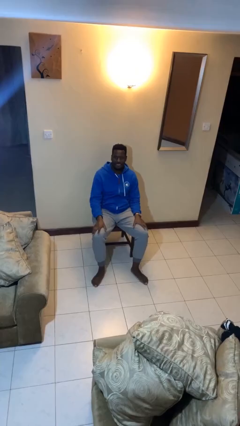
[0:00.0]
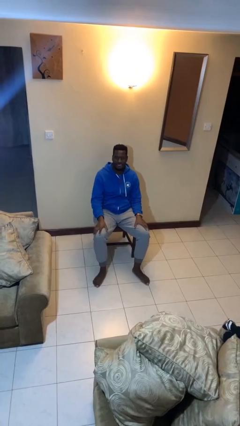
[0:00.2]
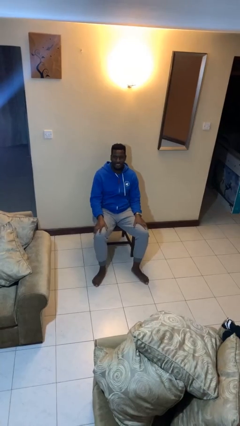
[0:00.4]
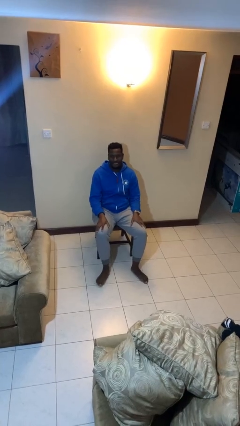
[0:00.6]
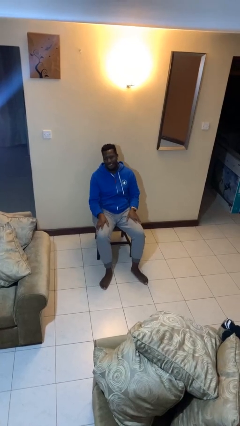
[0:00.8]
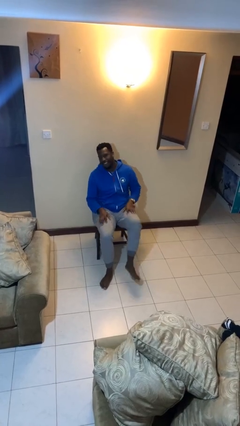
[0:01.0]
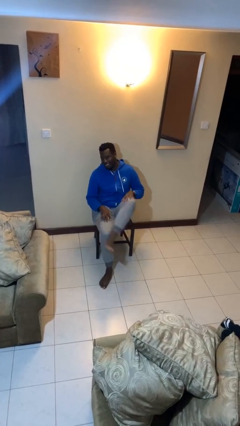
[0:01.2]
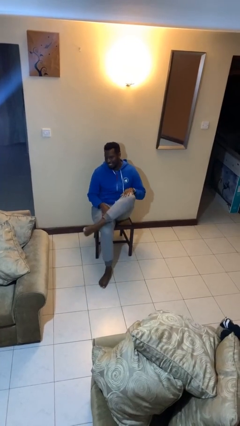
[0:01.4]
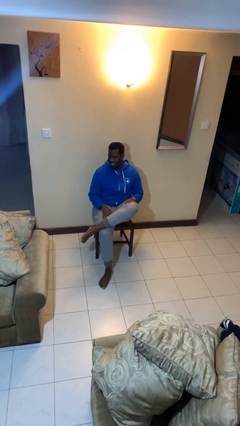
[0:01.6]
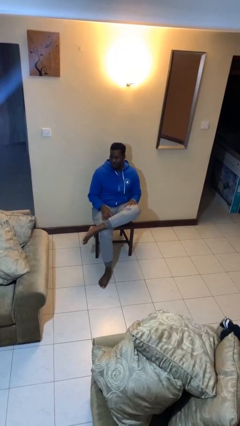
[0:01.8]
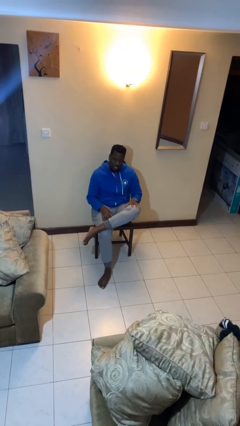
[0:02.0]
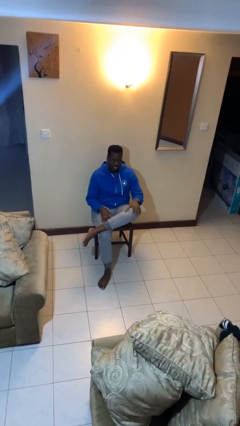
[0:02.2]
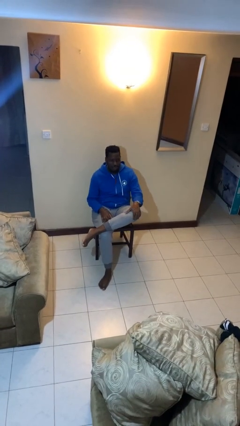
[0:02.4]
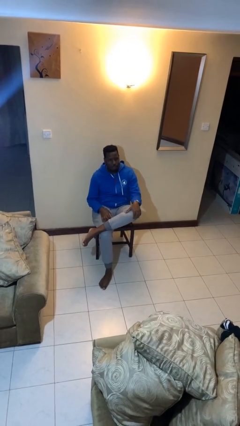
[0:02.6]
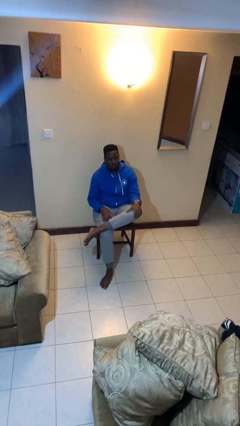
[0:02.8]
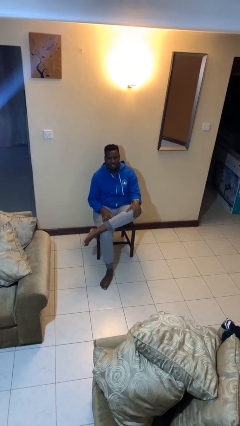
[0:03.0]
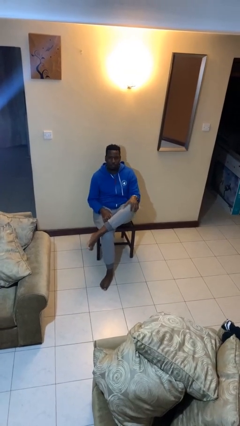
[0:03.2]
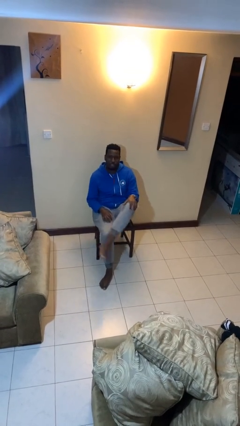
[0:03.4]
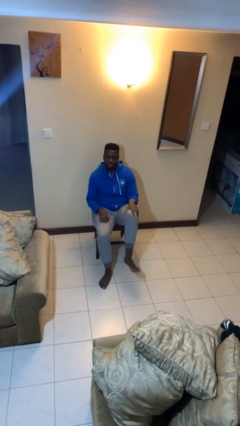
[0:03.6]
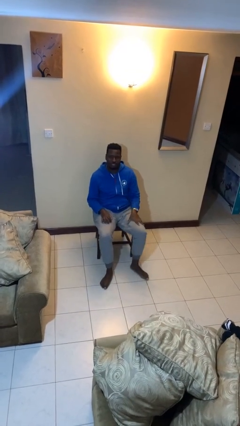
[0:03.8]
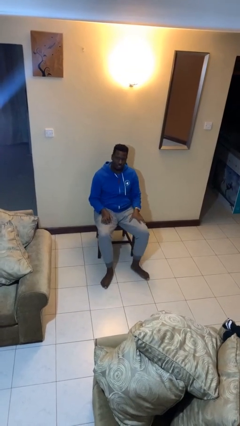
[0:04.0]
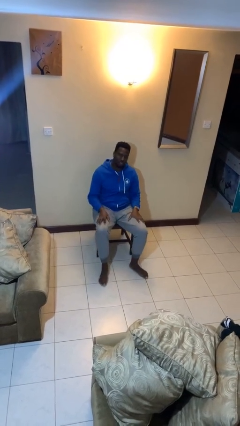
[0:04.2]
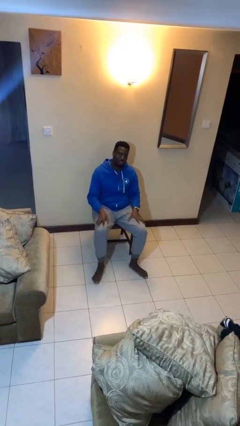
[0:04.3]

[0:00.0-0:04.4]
person crosses legs

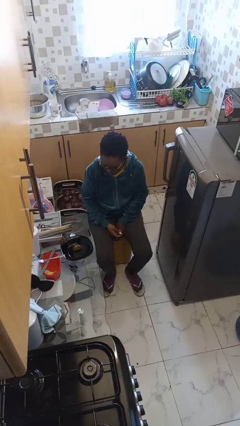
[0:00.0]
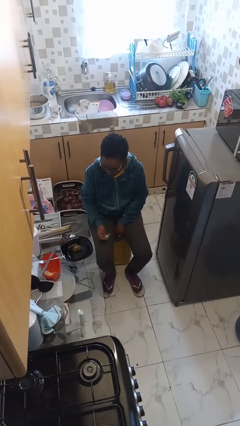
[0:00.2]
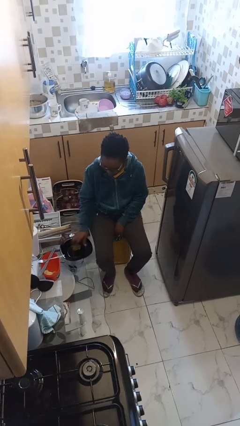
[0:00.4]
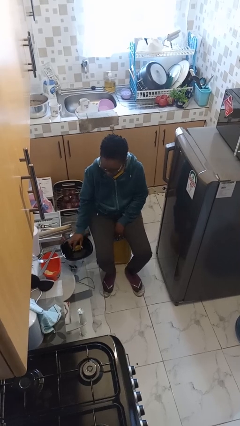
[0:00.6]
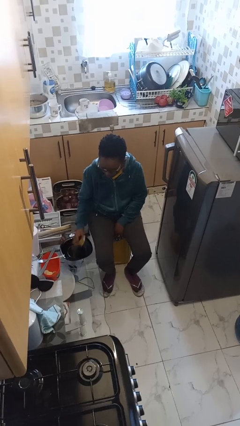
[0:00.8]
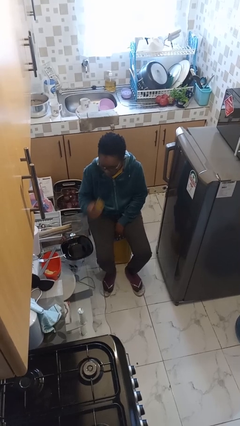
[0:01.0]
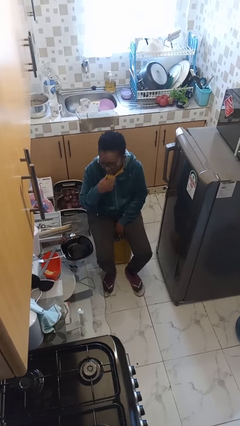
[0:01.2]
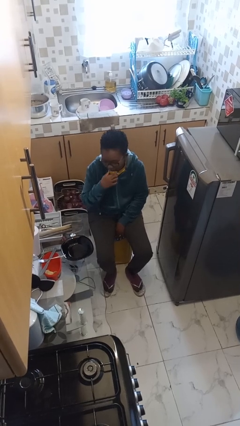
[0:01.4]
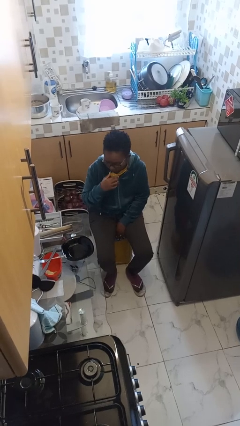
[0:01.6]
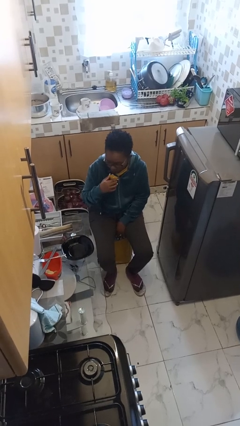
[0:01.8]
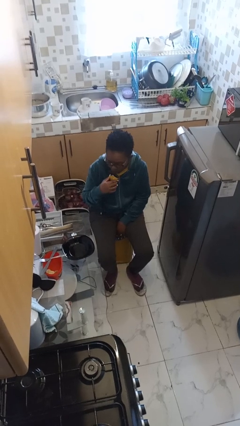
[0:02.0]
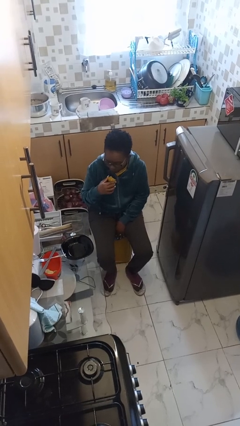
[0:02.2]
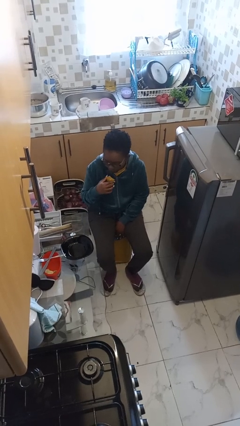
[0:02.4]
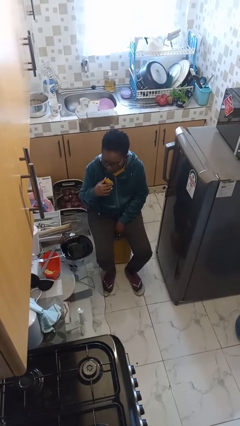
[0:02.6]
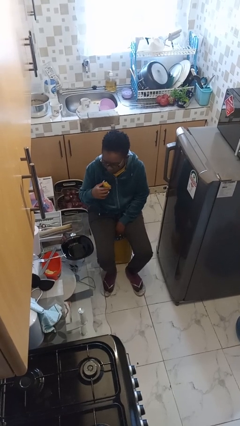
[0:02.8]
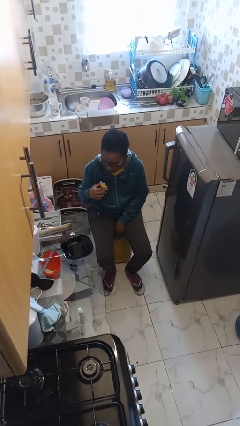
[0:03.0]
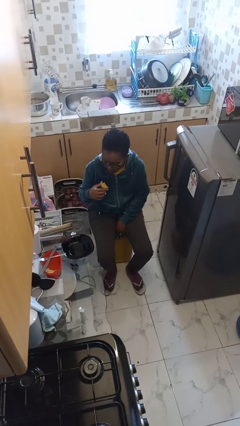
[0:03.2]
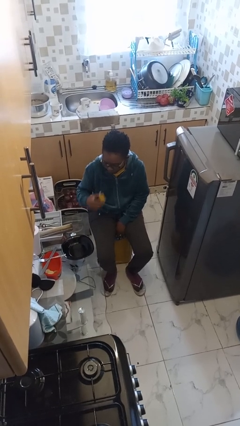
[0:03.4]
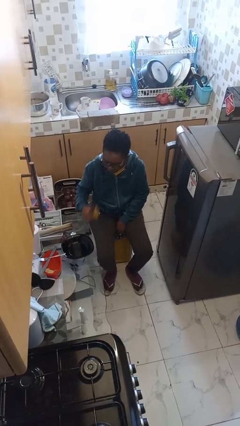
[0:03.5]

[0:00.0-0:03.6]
person eats with hands

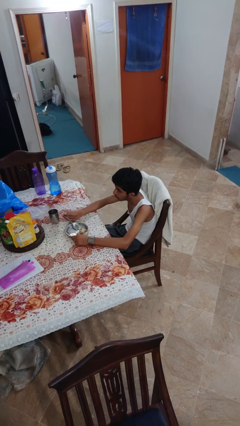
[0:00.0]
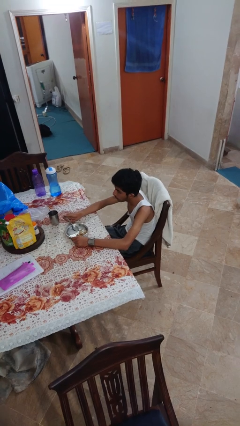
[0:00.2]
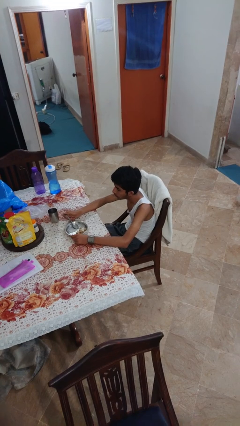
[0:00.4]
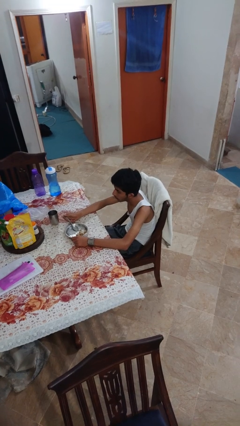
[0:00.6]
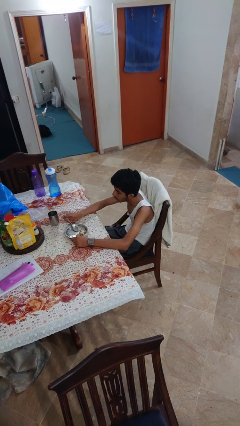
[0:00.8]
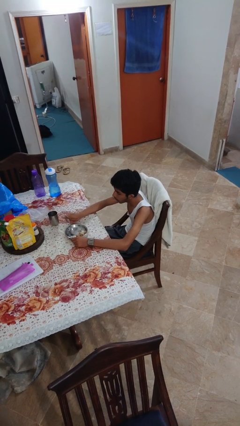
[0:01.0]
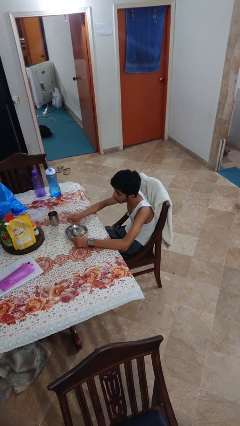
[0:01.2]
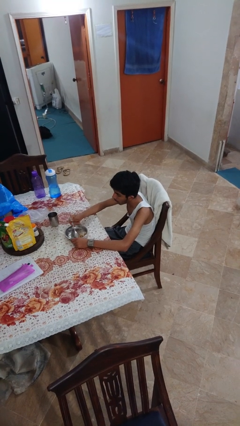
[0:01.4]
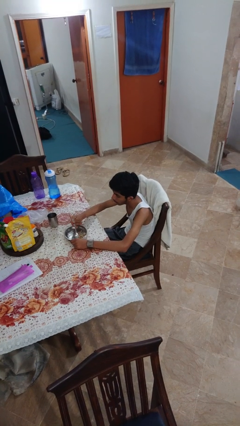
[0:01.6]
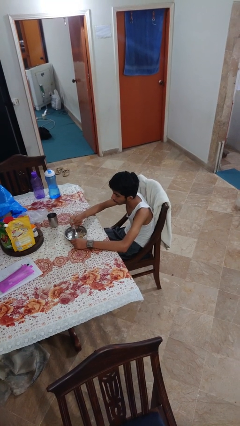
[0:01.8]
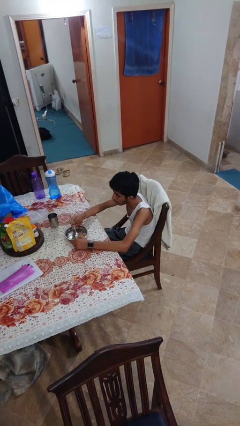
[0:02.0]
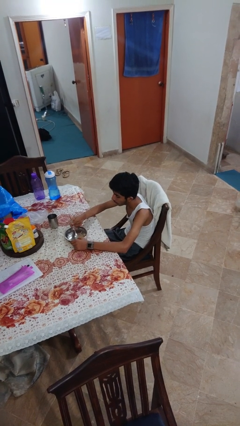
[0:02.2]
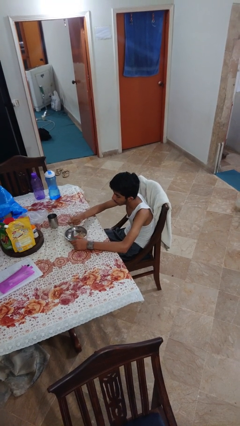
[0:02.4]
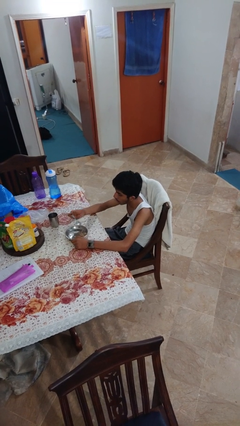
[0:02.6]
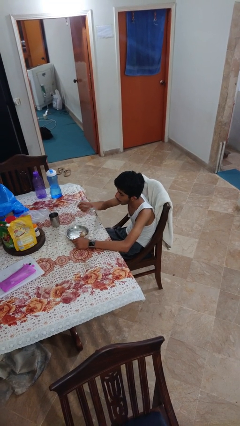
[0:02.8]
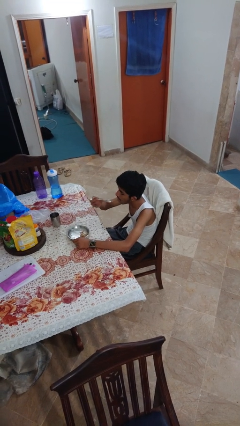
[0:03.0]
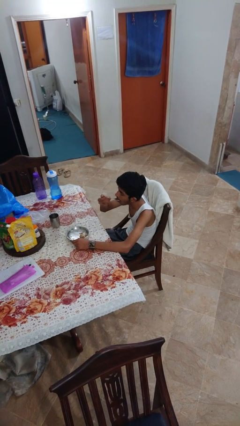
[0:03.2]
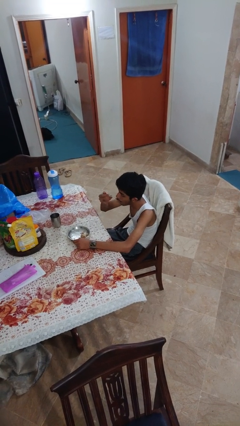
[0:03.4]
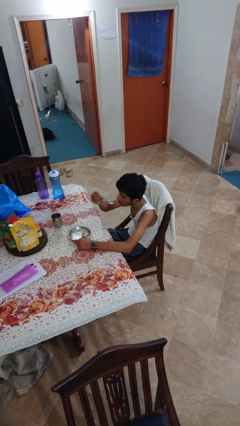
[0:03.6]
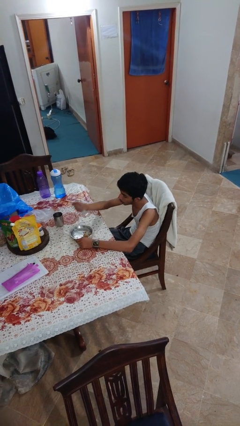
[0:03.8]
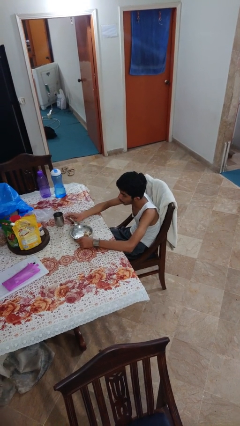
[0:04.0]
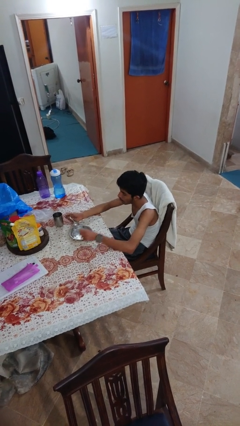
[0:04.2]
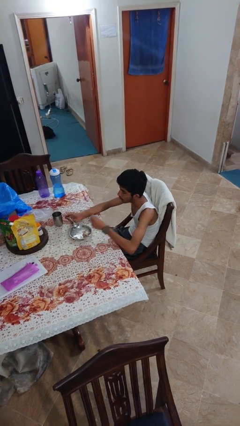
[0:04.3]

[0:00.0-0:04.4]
person eats with utensil

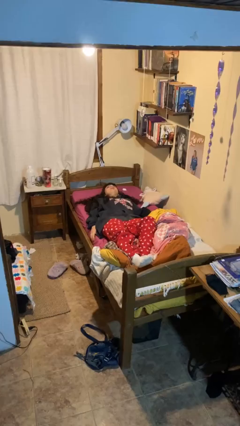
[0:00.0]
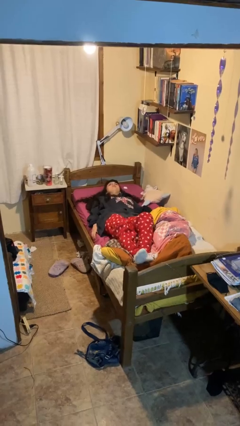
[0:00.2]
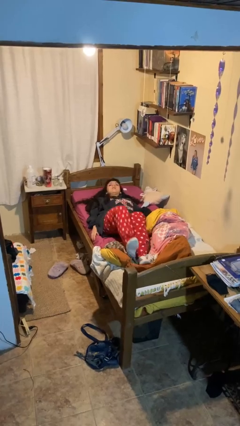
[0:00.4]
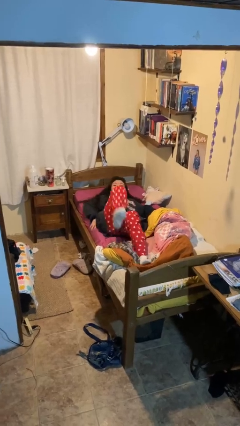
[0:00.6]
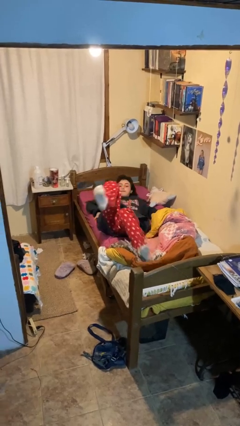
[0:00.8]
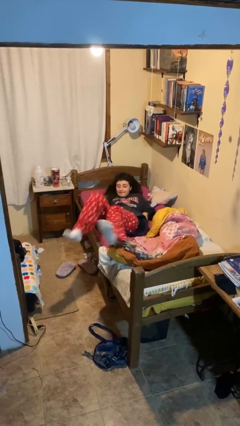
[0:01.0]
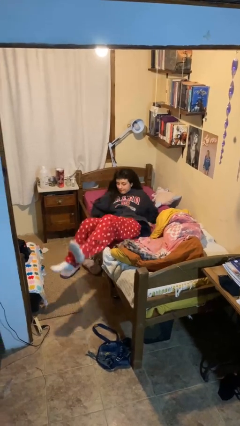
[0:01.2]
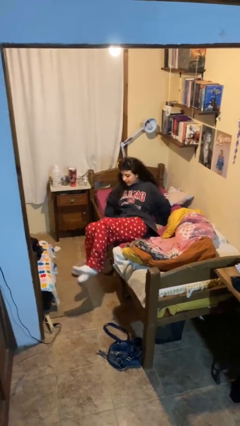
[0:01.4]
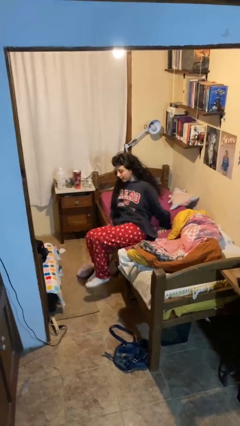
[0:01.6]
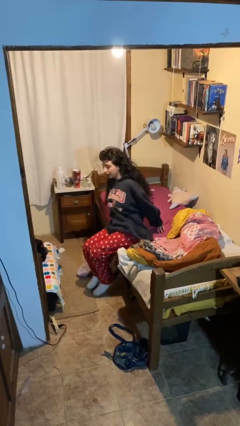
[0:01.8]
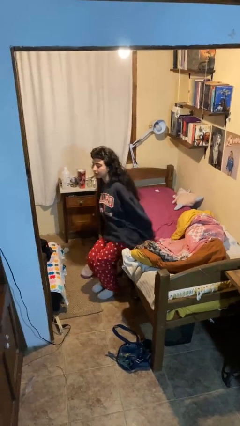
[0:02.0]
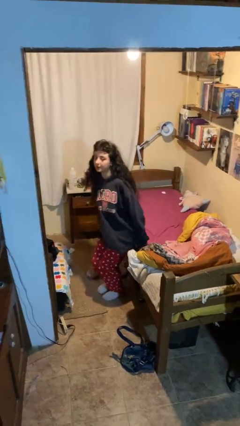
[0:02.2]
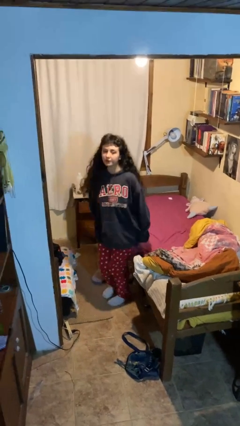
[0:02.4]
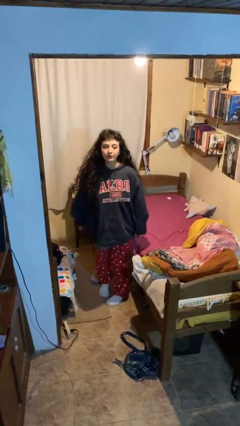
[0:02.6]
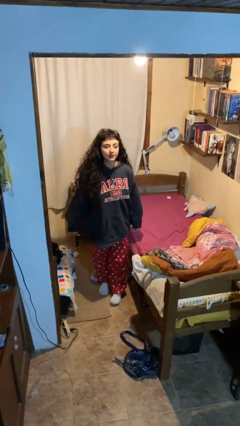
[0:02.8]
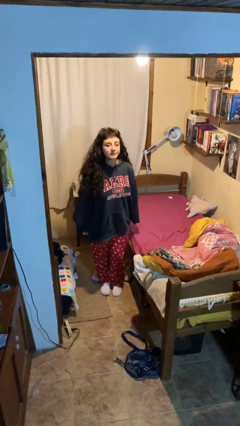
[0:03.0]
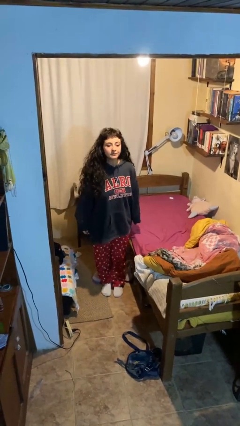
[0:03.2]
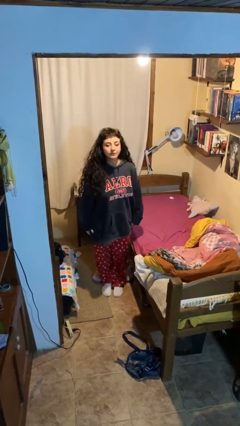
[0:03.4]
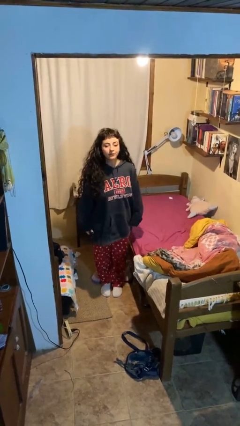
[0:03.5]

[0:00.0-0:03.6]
person stands up

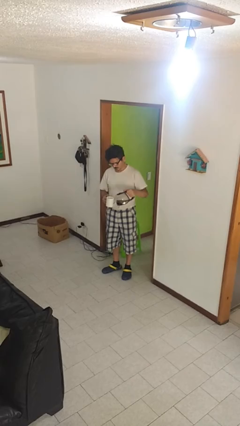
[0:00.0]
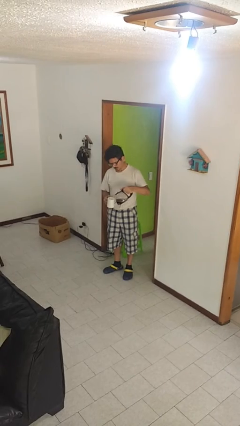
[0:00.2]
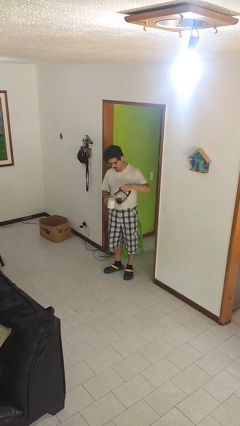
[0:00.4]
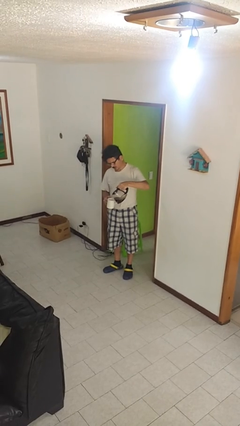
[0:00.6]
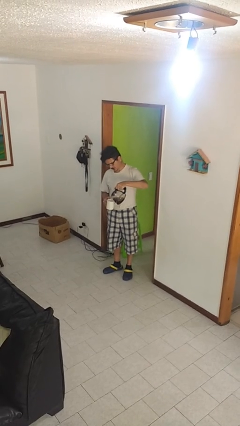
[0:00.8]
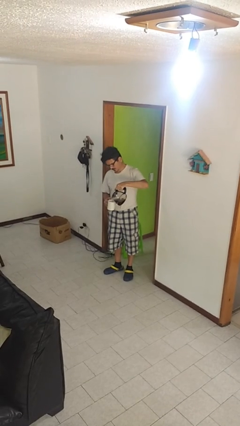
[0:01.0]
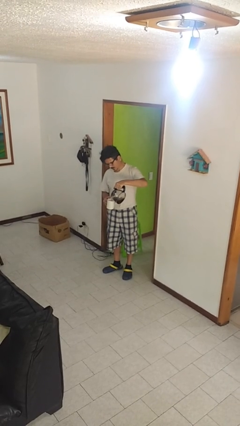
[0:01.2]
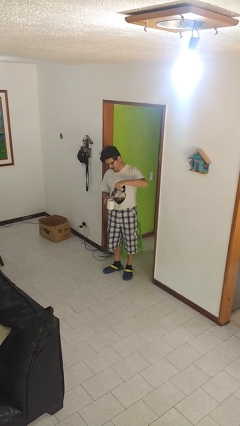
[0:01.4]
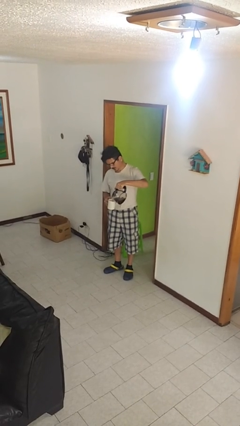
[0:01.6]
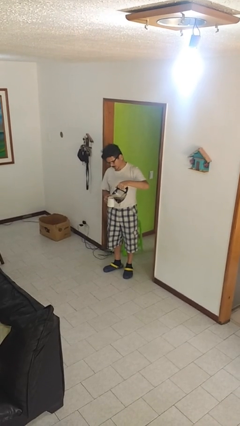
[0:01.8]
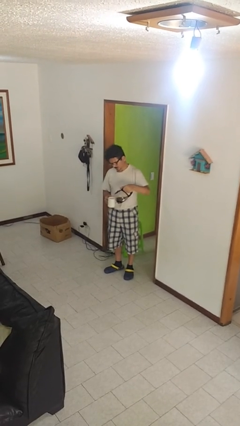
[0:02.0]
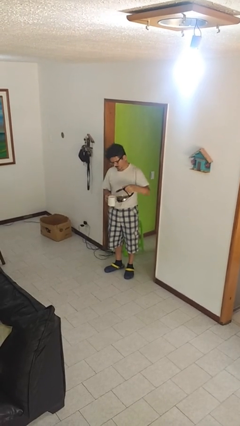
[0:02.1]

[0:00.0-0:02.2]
person pours coffee into mug
